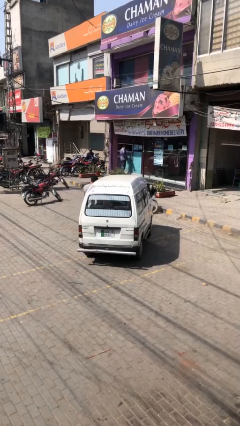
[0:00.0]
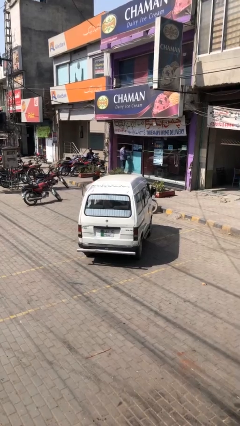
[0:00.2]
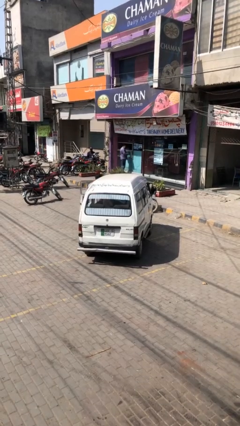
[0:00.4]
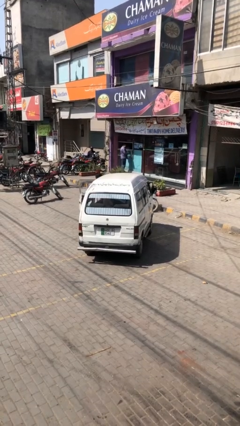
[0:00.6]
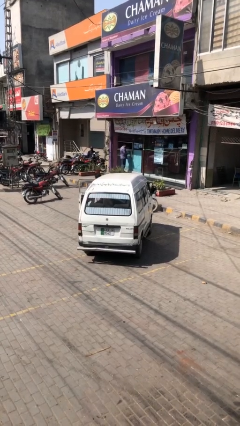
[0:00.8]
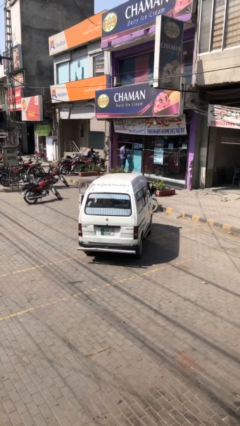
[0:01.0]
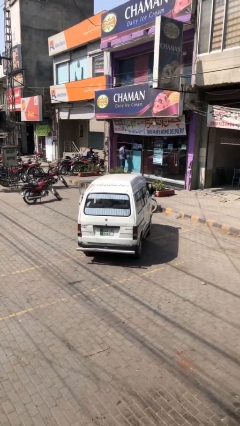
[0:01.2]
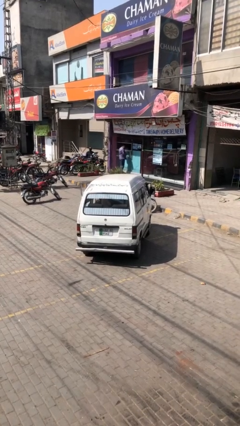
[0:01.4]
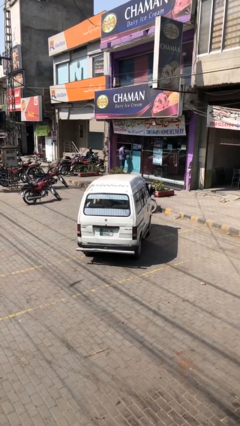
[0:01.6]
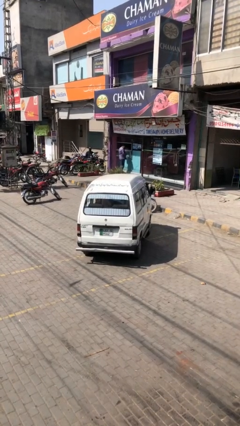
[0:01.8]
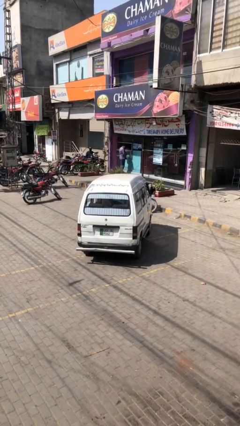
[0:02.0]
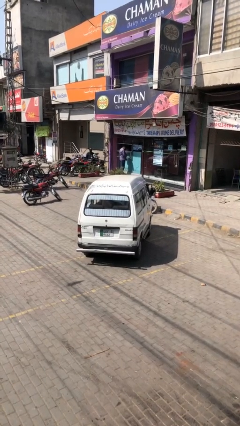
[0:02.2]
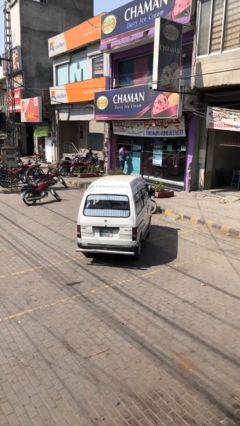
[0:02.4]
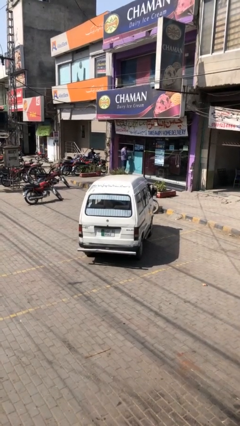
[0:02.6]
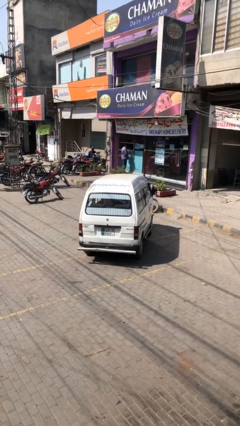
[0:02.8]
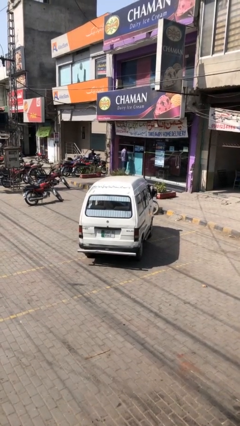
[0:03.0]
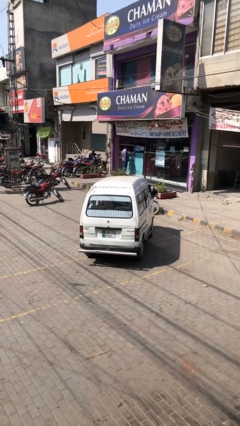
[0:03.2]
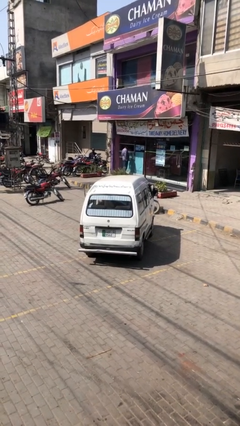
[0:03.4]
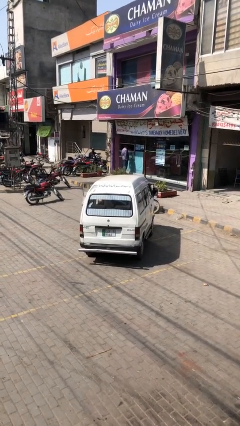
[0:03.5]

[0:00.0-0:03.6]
car picks up person

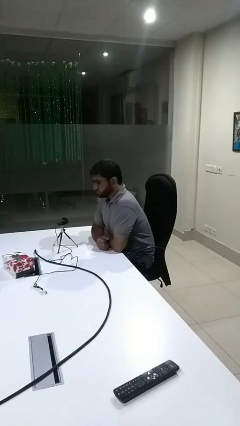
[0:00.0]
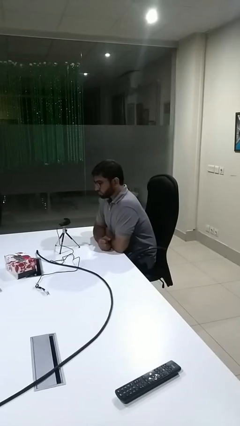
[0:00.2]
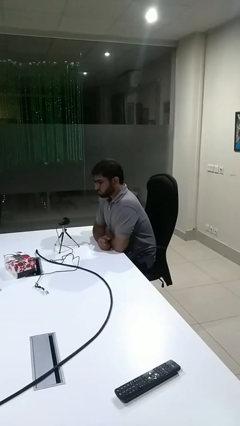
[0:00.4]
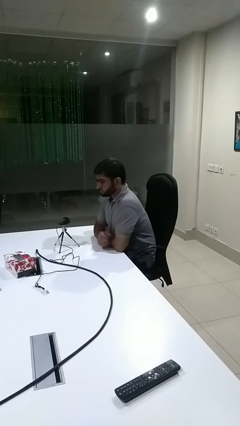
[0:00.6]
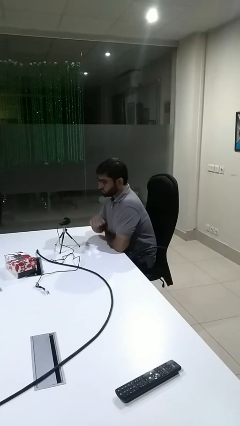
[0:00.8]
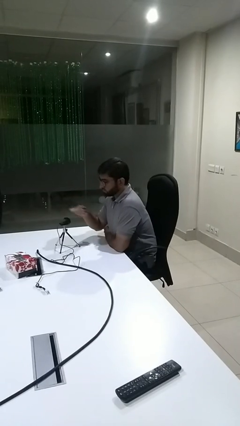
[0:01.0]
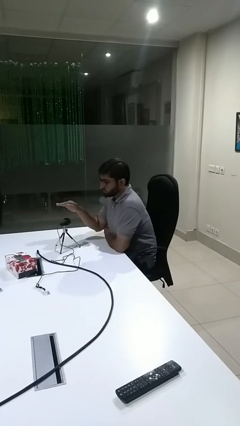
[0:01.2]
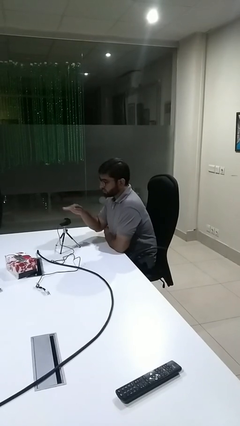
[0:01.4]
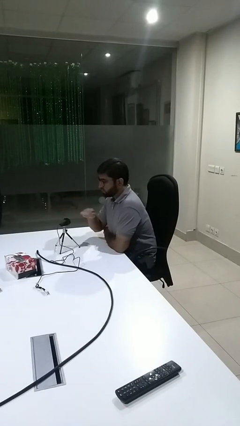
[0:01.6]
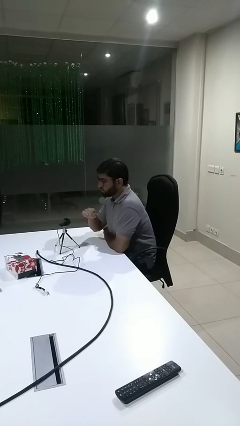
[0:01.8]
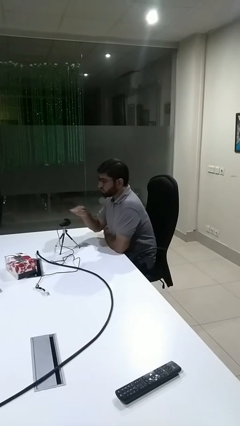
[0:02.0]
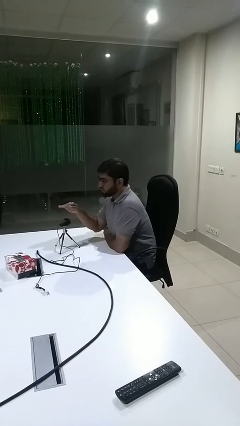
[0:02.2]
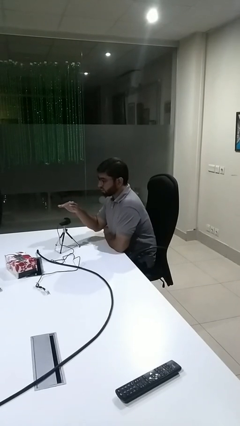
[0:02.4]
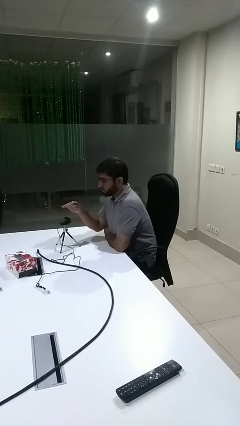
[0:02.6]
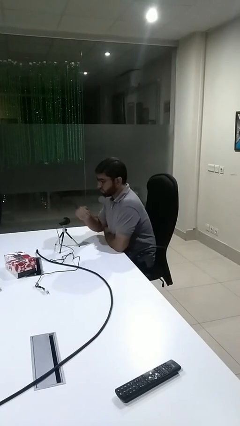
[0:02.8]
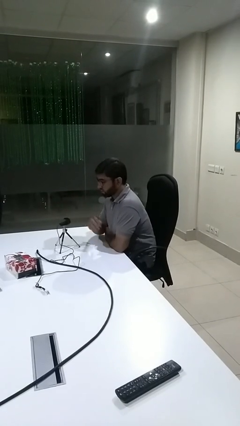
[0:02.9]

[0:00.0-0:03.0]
person waves hand over object

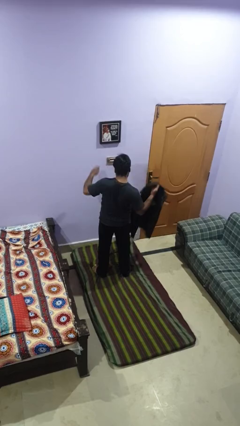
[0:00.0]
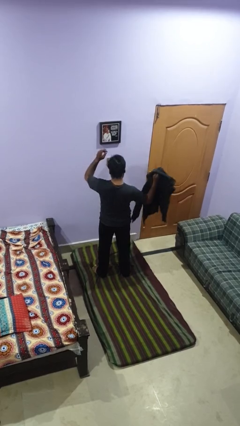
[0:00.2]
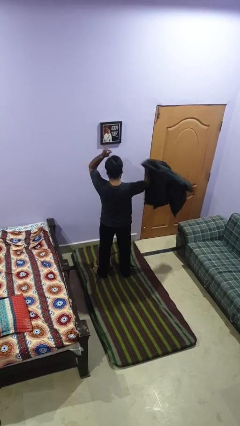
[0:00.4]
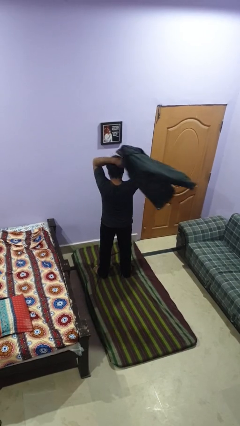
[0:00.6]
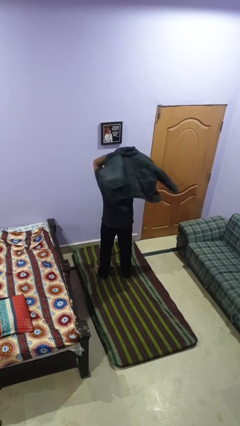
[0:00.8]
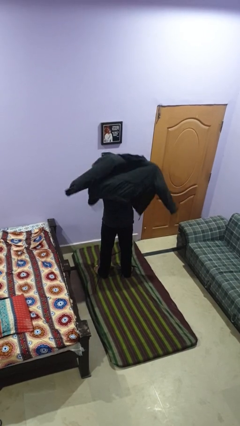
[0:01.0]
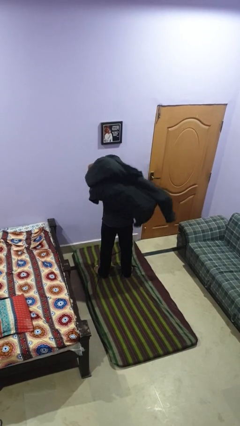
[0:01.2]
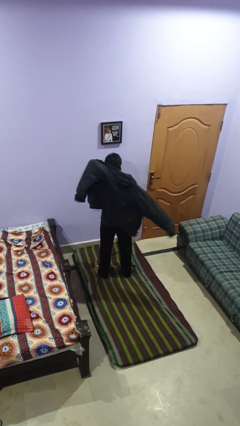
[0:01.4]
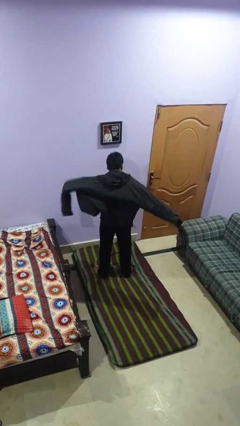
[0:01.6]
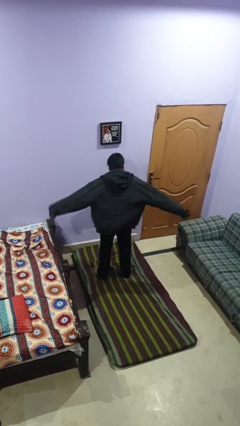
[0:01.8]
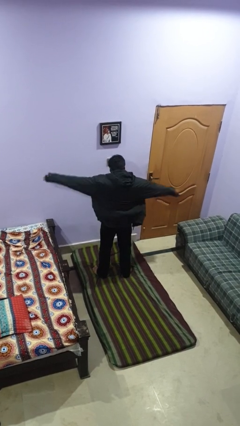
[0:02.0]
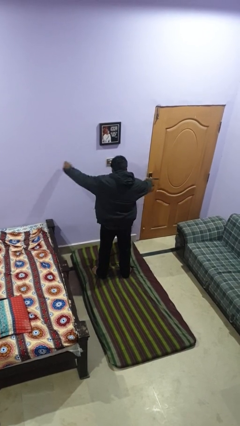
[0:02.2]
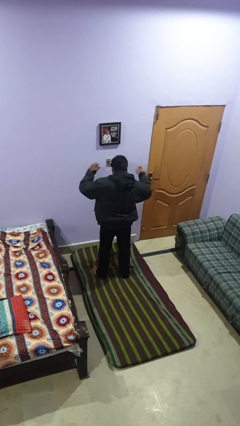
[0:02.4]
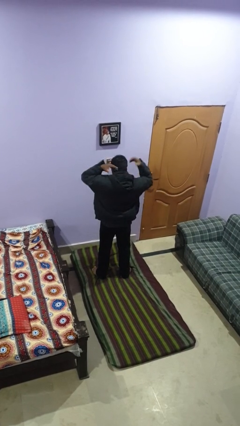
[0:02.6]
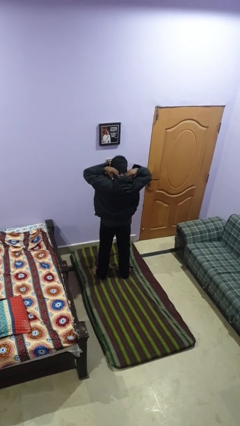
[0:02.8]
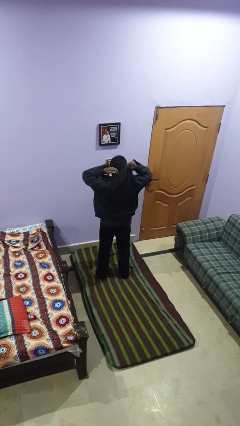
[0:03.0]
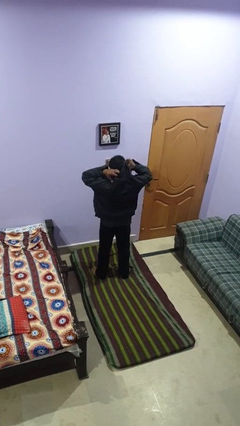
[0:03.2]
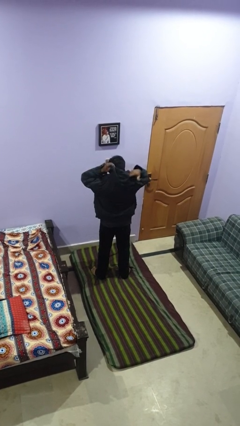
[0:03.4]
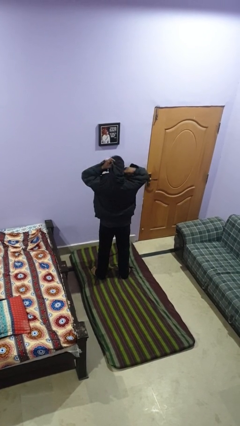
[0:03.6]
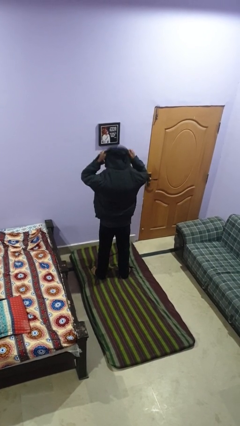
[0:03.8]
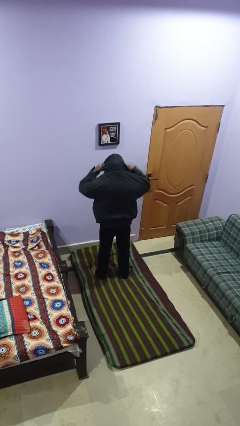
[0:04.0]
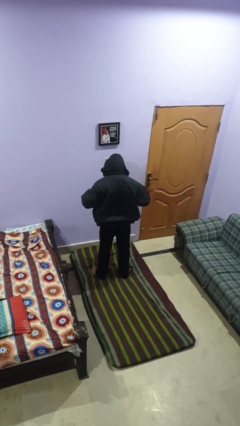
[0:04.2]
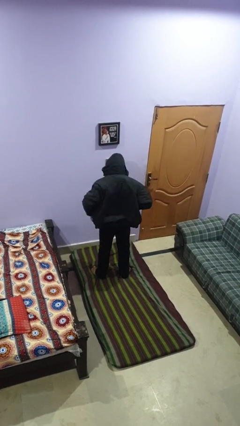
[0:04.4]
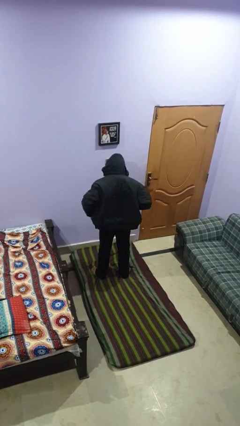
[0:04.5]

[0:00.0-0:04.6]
person puts on hoodie

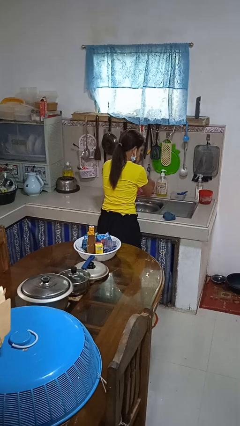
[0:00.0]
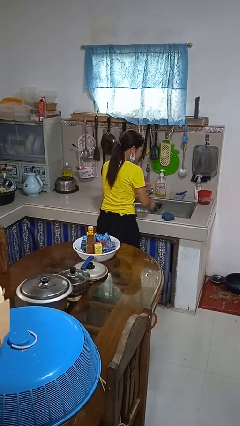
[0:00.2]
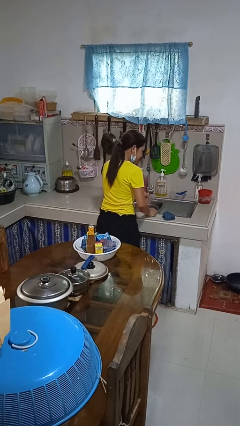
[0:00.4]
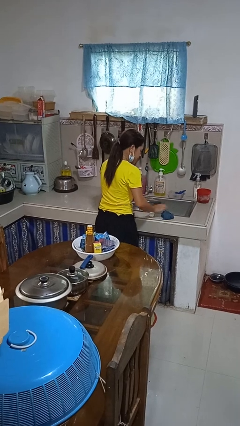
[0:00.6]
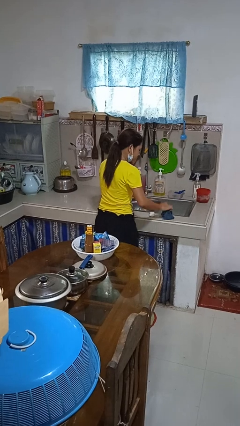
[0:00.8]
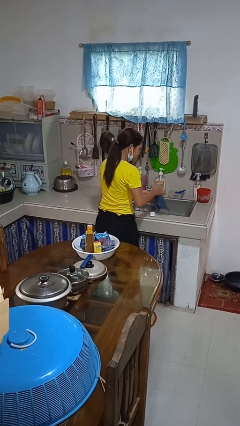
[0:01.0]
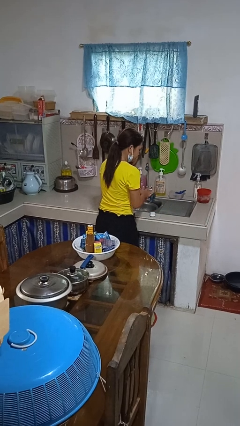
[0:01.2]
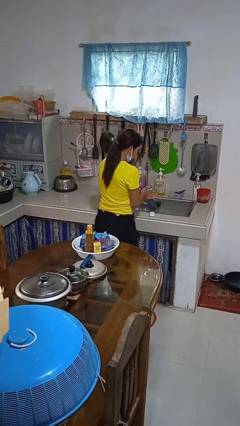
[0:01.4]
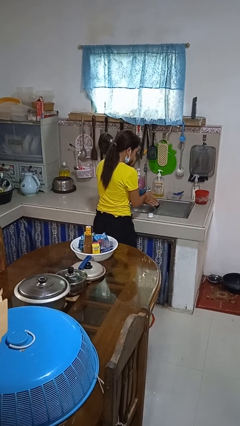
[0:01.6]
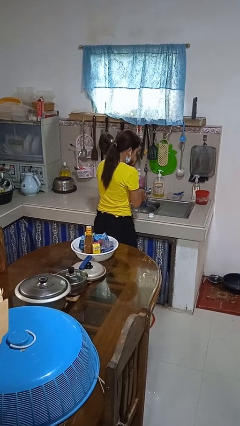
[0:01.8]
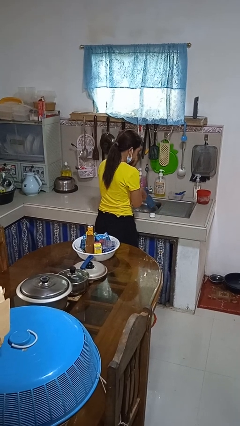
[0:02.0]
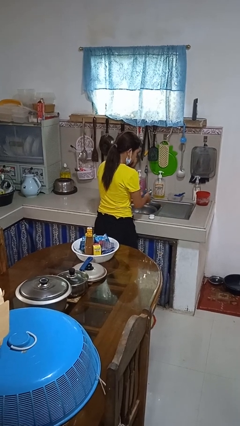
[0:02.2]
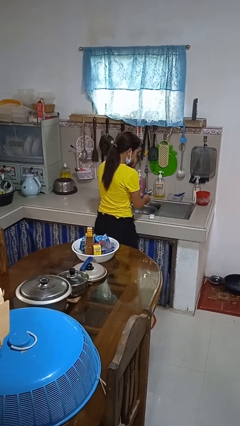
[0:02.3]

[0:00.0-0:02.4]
person dries hands with towel

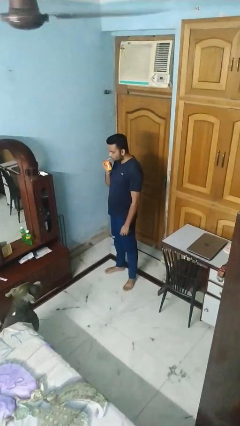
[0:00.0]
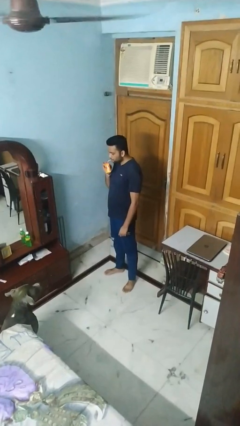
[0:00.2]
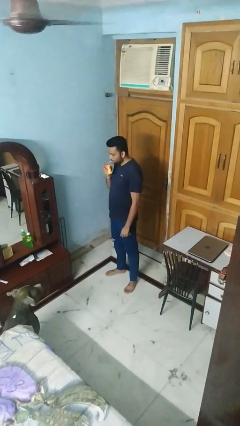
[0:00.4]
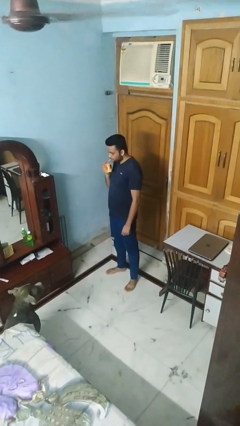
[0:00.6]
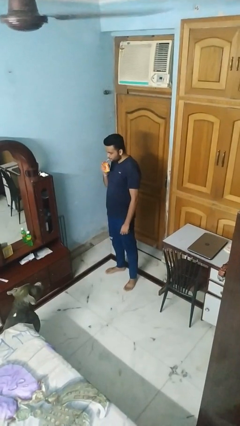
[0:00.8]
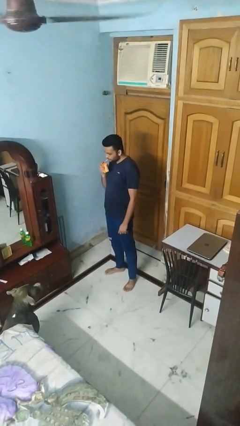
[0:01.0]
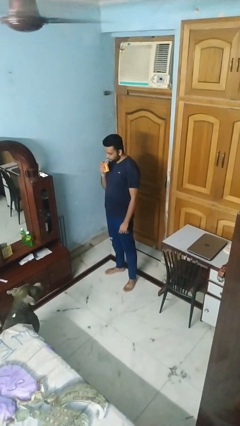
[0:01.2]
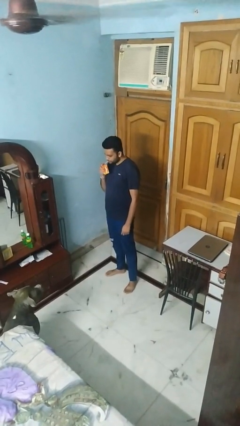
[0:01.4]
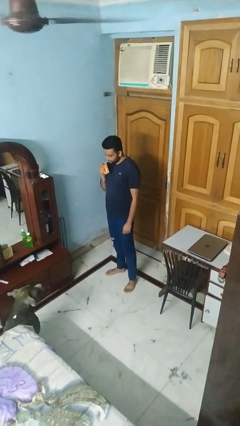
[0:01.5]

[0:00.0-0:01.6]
person drinks from straw

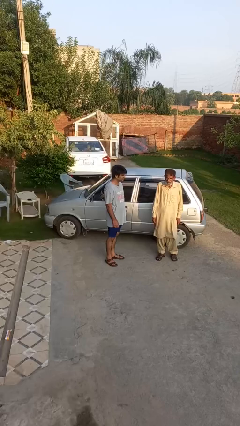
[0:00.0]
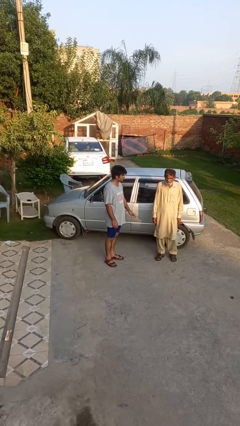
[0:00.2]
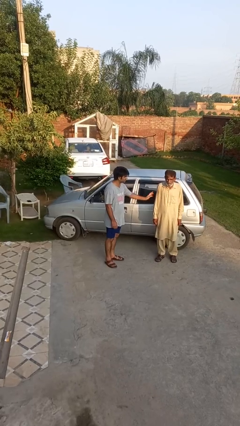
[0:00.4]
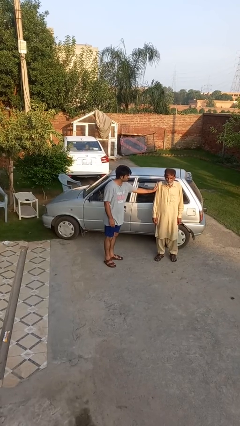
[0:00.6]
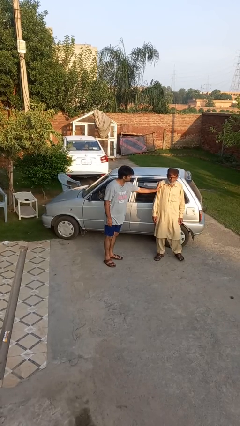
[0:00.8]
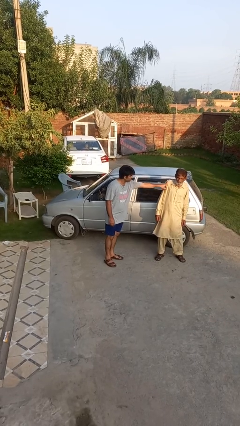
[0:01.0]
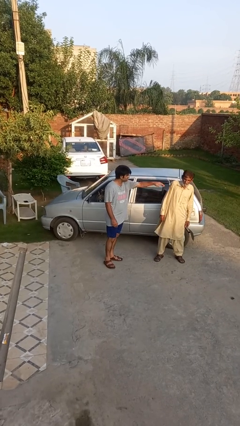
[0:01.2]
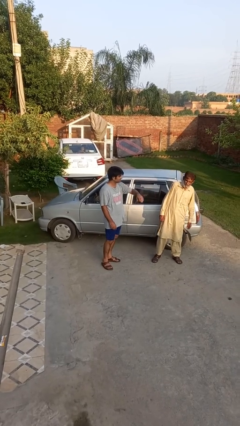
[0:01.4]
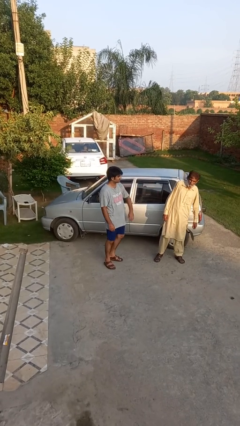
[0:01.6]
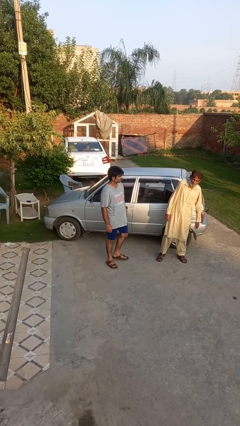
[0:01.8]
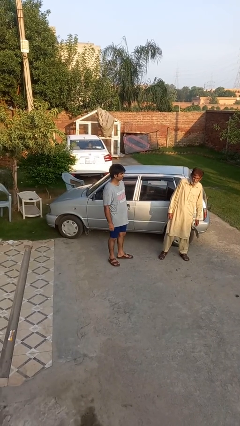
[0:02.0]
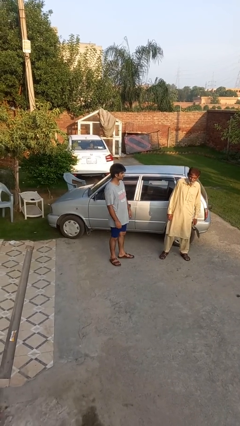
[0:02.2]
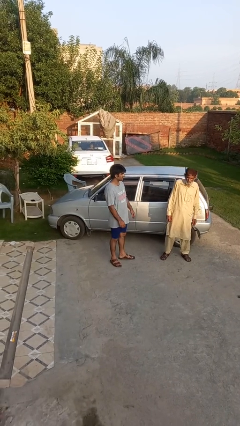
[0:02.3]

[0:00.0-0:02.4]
person shoves person
